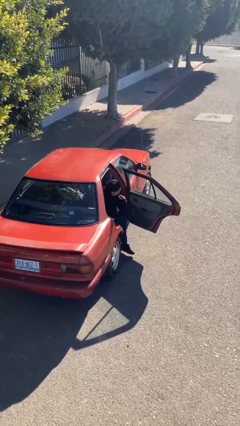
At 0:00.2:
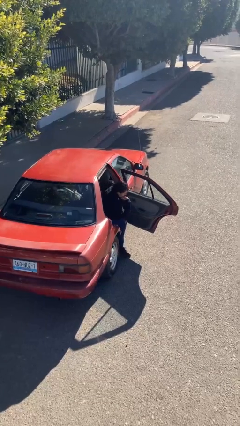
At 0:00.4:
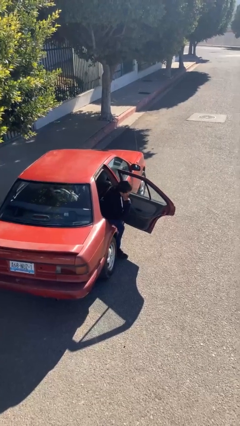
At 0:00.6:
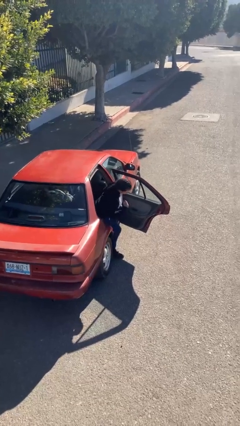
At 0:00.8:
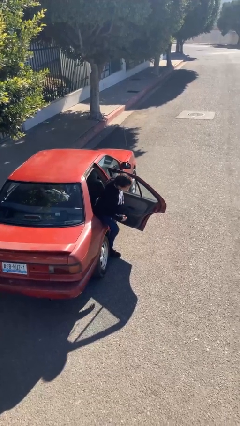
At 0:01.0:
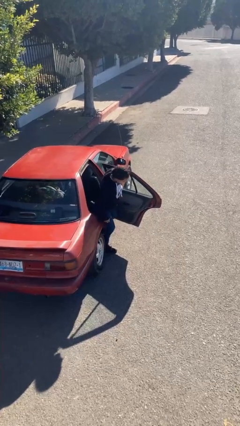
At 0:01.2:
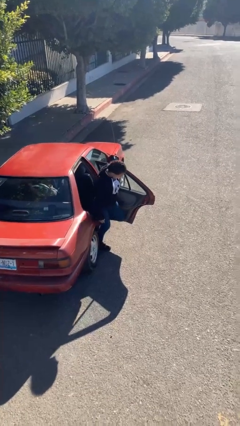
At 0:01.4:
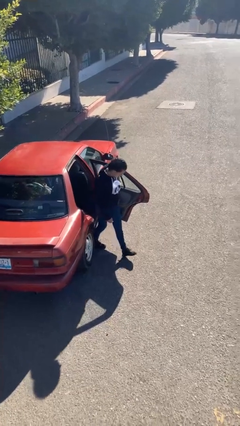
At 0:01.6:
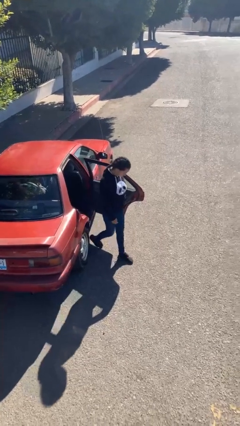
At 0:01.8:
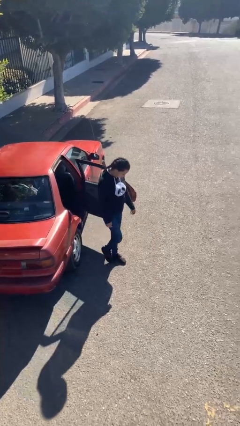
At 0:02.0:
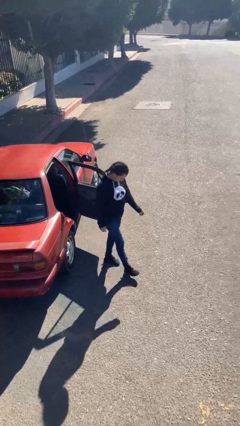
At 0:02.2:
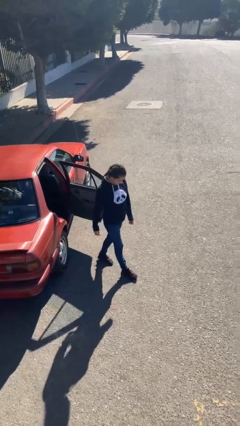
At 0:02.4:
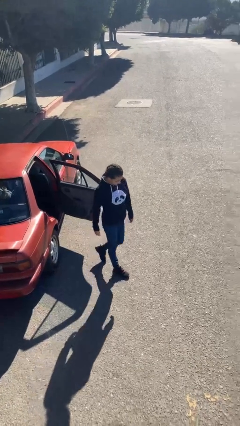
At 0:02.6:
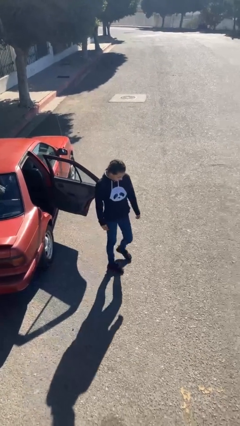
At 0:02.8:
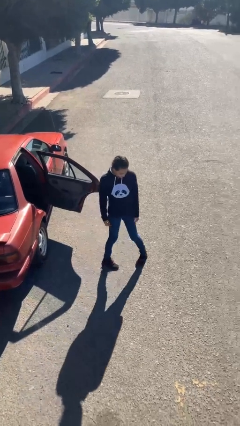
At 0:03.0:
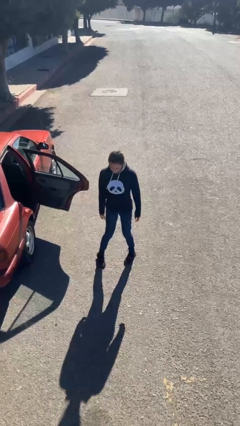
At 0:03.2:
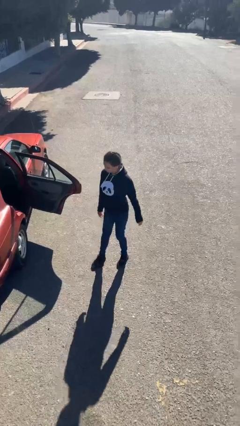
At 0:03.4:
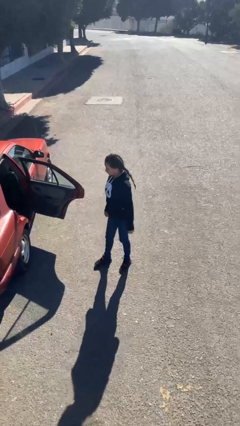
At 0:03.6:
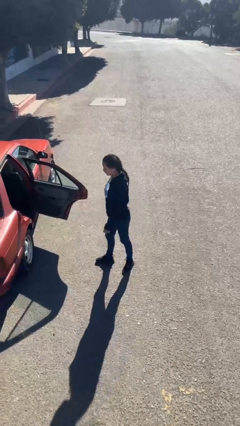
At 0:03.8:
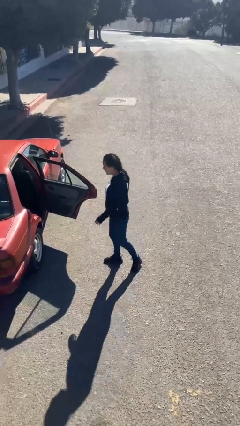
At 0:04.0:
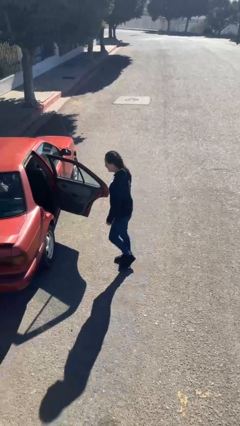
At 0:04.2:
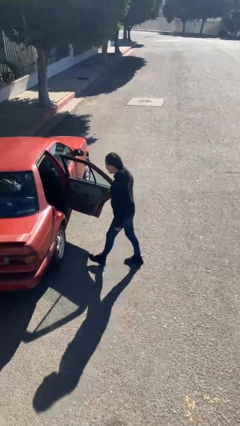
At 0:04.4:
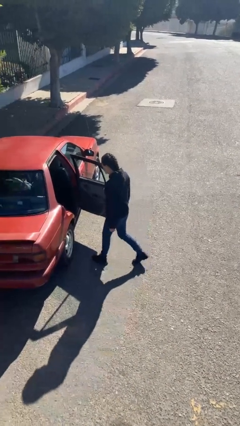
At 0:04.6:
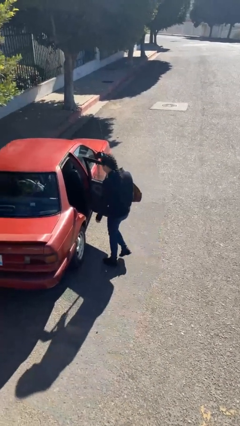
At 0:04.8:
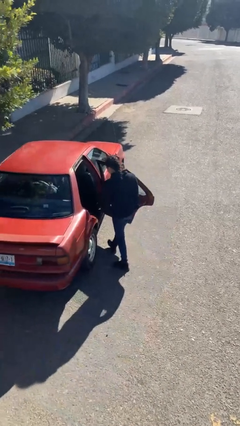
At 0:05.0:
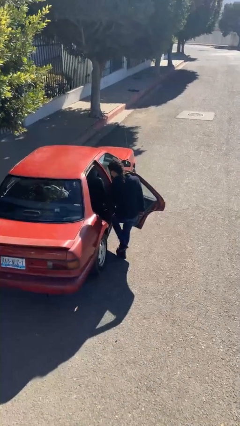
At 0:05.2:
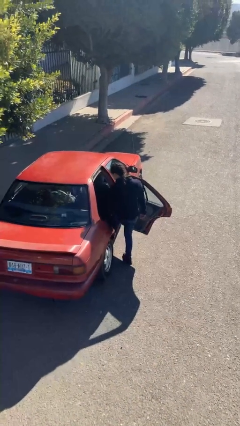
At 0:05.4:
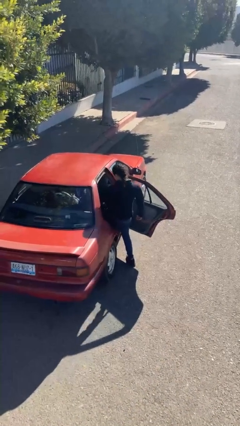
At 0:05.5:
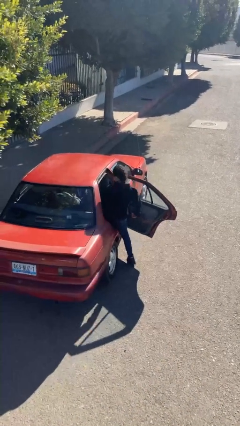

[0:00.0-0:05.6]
person exits car

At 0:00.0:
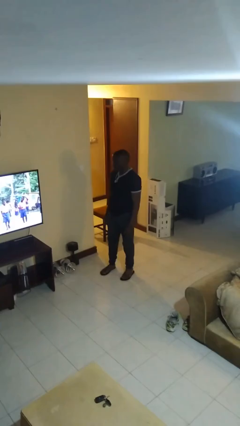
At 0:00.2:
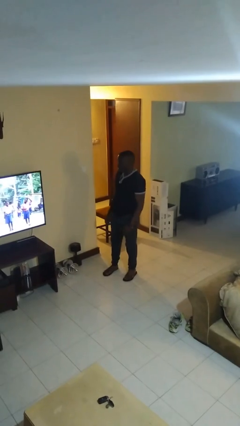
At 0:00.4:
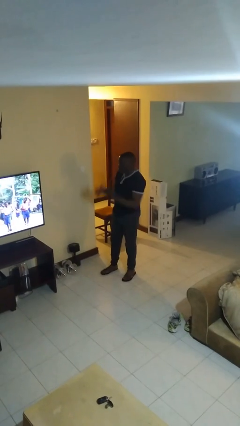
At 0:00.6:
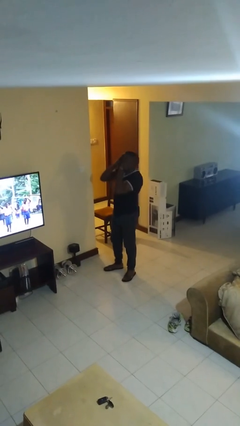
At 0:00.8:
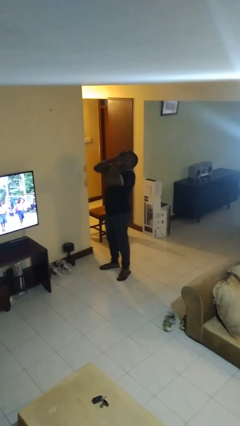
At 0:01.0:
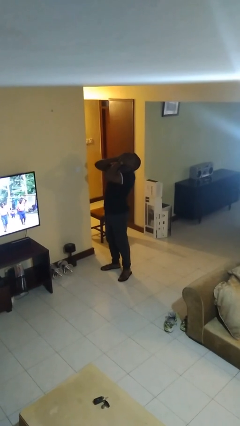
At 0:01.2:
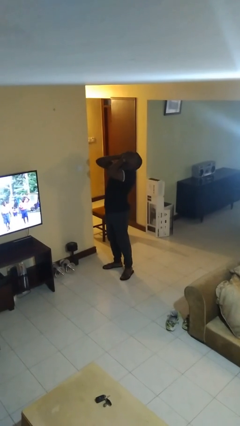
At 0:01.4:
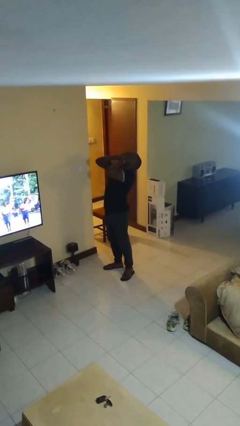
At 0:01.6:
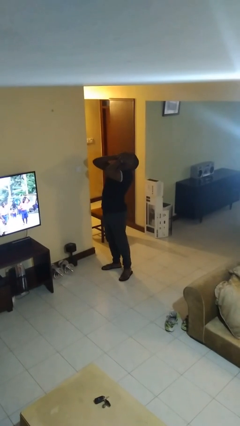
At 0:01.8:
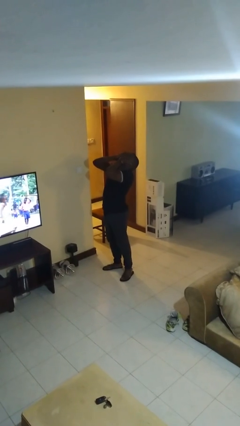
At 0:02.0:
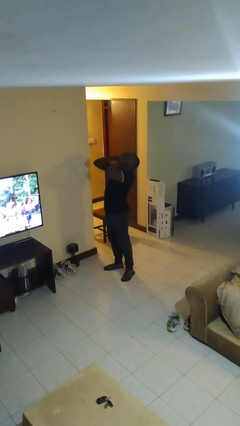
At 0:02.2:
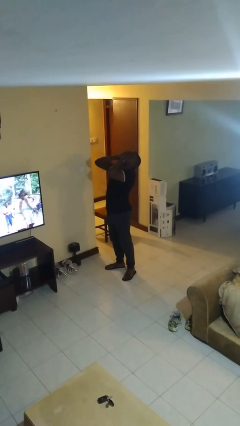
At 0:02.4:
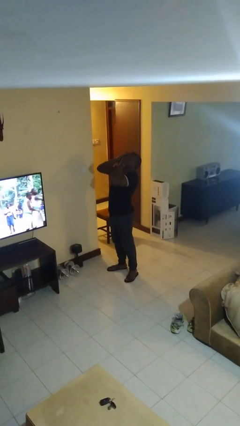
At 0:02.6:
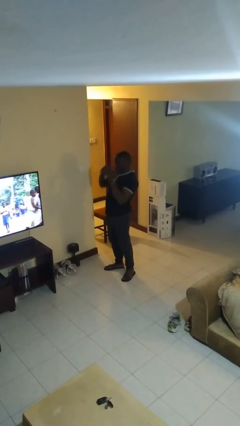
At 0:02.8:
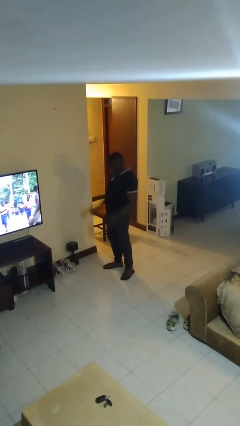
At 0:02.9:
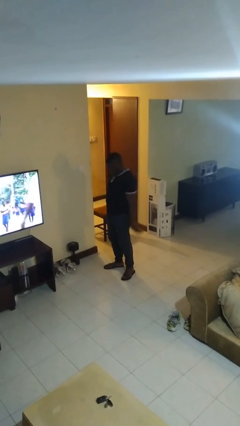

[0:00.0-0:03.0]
person covers face with hands

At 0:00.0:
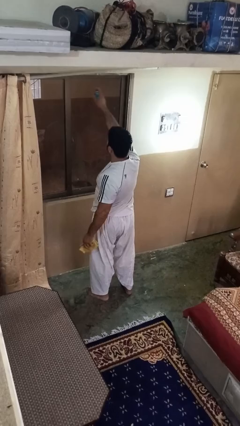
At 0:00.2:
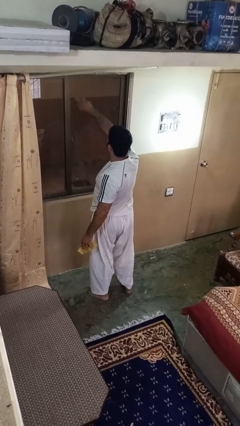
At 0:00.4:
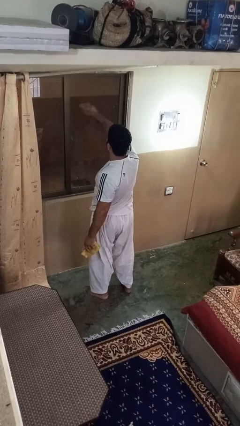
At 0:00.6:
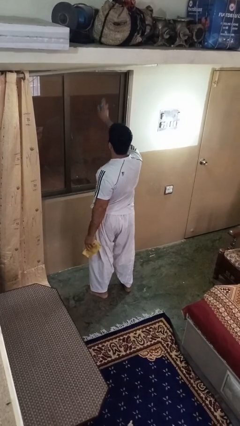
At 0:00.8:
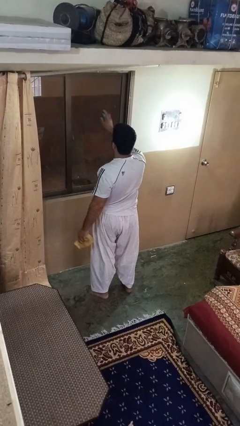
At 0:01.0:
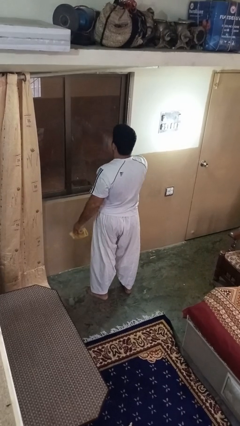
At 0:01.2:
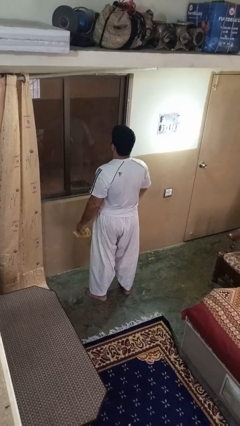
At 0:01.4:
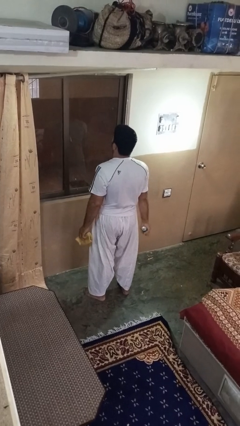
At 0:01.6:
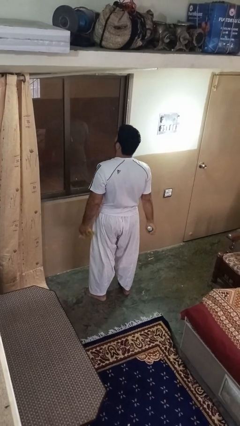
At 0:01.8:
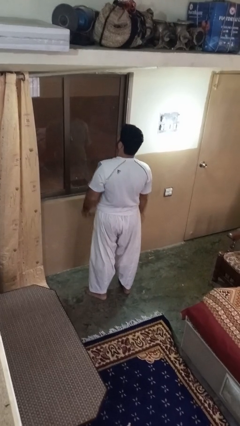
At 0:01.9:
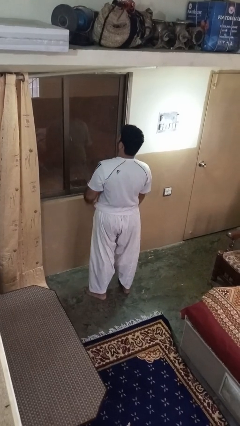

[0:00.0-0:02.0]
person sprays from bottle

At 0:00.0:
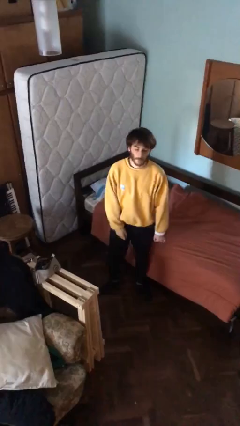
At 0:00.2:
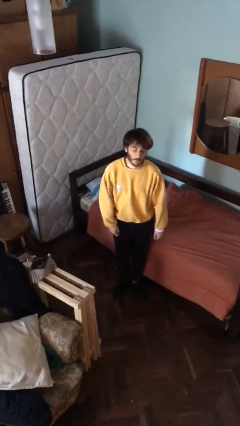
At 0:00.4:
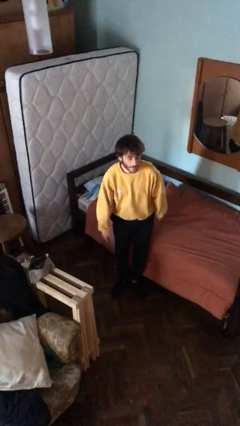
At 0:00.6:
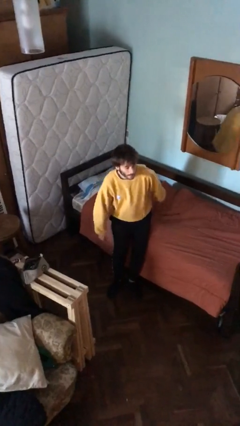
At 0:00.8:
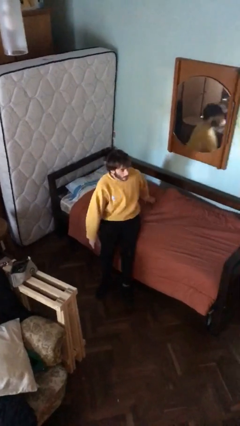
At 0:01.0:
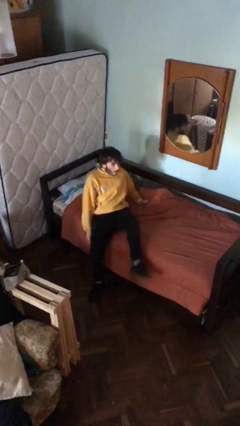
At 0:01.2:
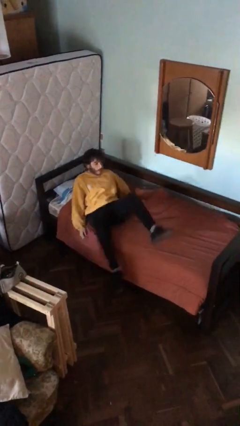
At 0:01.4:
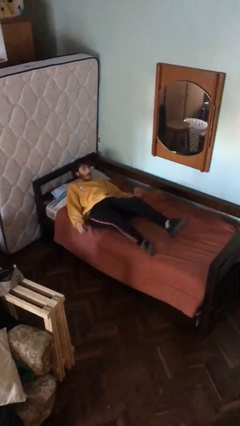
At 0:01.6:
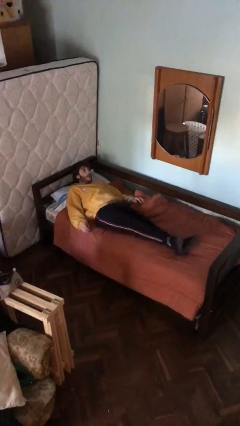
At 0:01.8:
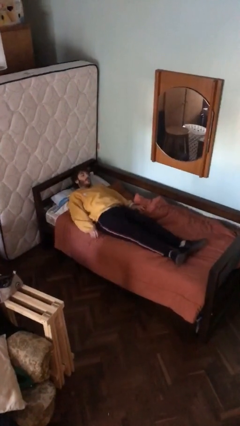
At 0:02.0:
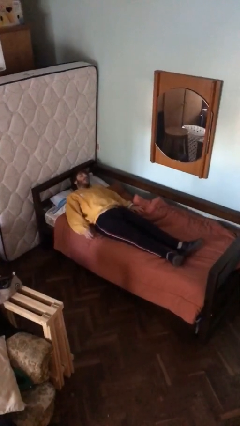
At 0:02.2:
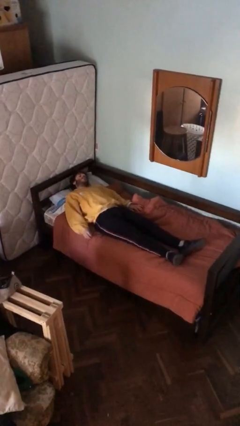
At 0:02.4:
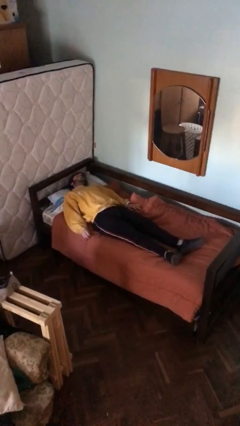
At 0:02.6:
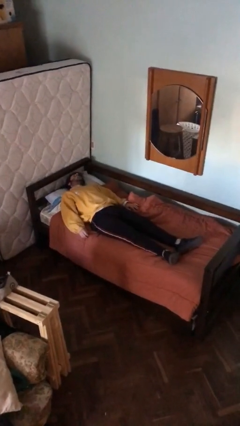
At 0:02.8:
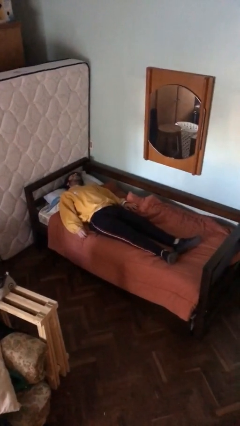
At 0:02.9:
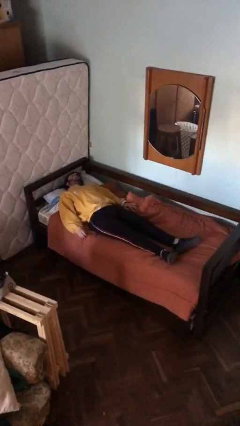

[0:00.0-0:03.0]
person lies down on bed

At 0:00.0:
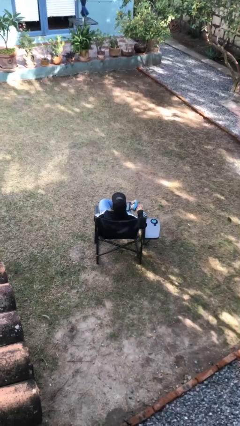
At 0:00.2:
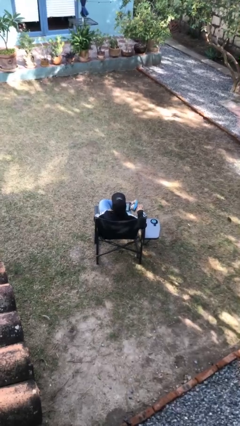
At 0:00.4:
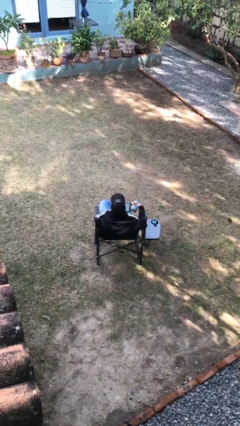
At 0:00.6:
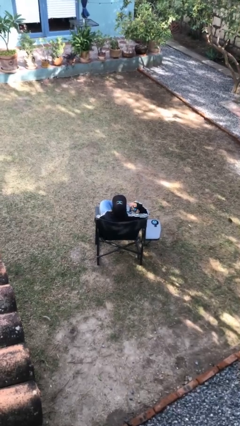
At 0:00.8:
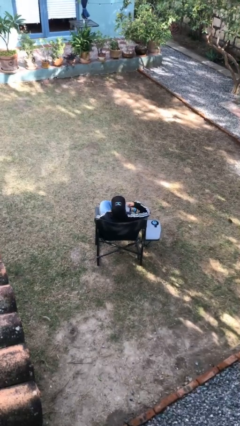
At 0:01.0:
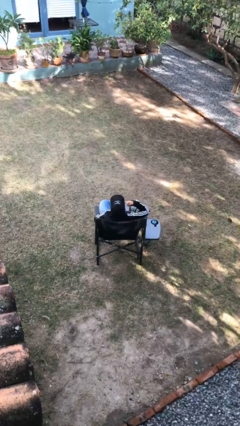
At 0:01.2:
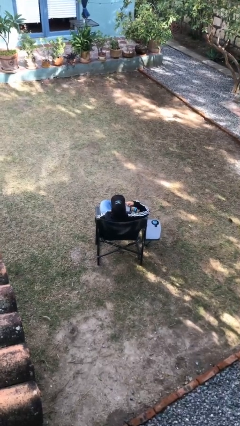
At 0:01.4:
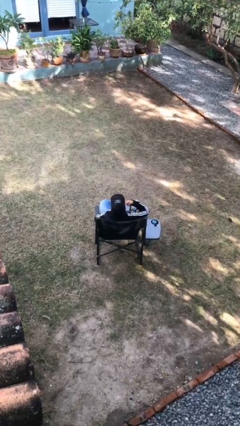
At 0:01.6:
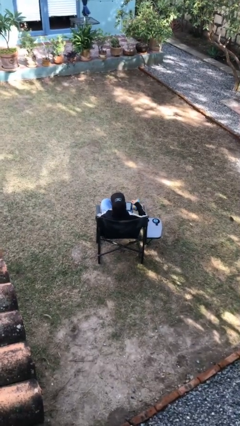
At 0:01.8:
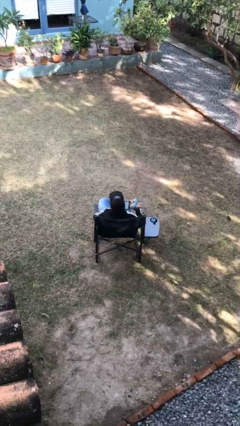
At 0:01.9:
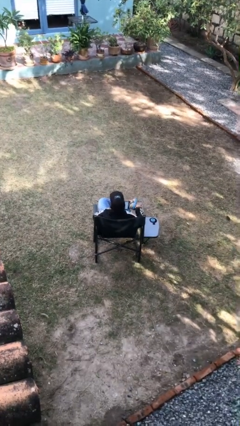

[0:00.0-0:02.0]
person gestures call me

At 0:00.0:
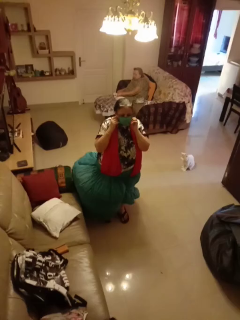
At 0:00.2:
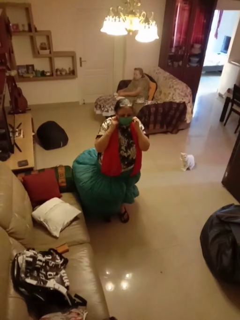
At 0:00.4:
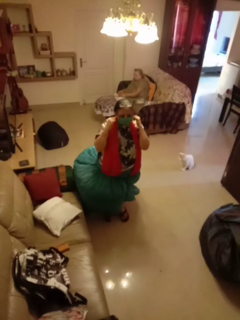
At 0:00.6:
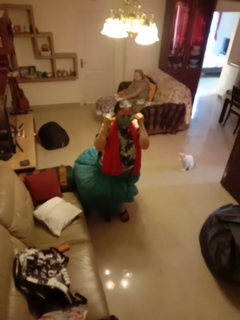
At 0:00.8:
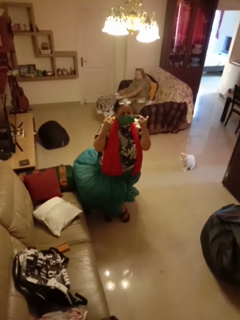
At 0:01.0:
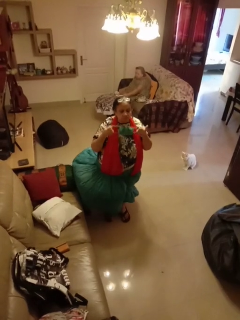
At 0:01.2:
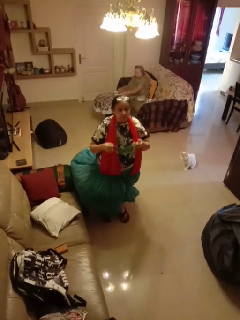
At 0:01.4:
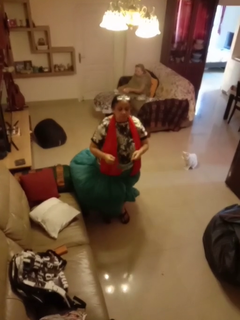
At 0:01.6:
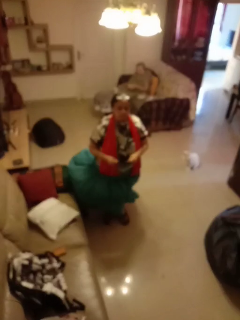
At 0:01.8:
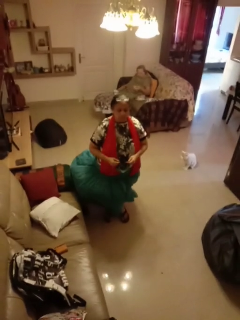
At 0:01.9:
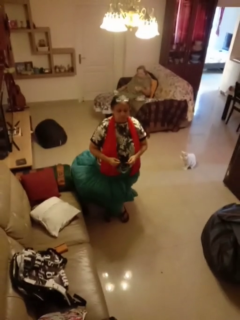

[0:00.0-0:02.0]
person takes off facemask

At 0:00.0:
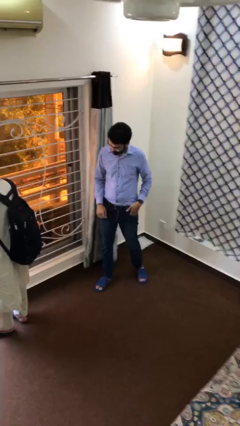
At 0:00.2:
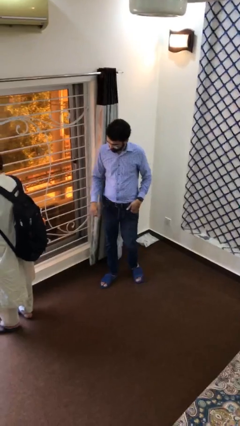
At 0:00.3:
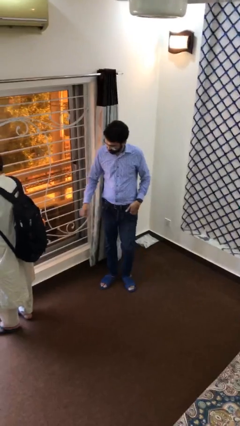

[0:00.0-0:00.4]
person steals object from person
